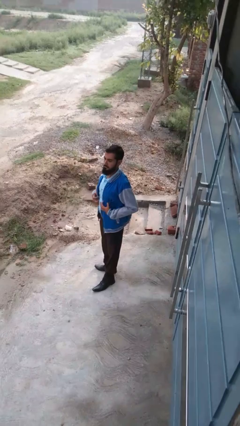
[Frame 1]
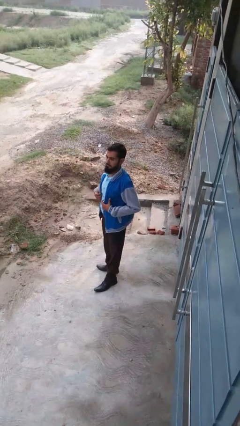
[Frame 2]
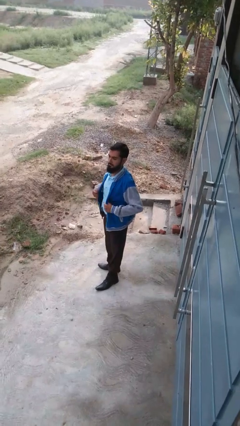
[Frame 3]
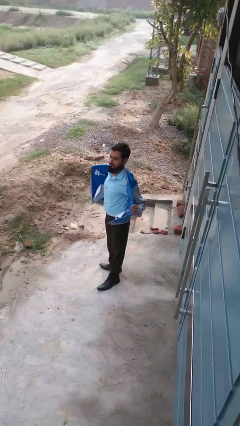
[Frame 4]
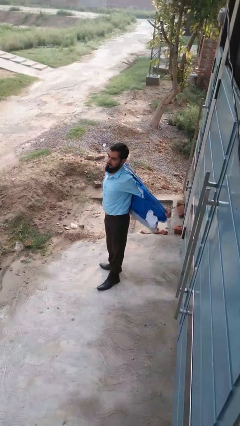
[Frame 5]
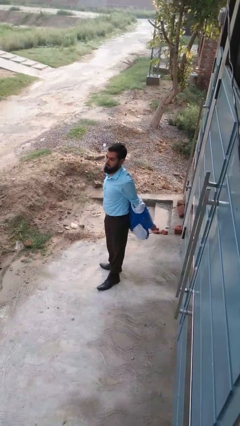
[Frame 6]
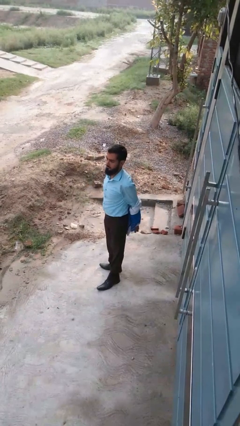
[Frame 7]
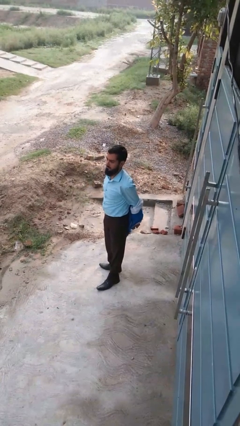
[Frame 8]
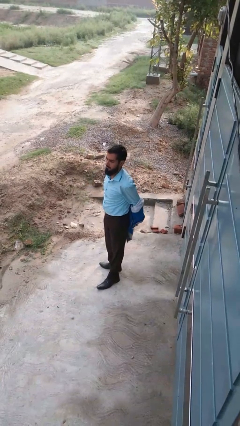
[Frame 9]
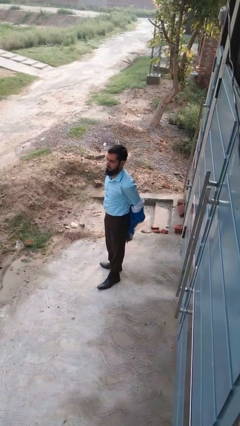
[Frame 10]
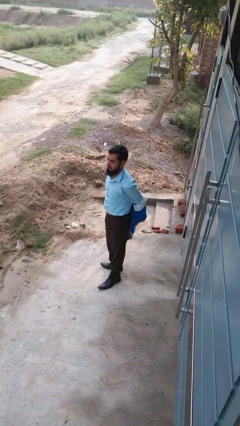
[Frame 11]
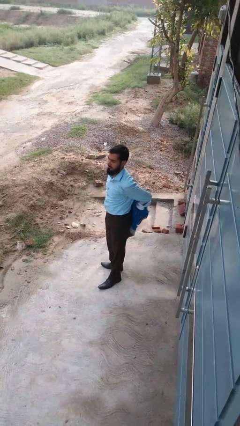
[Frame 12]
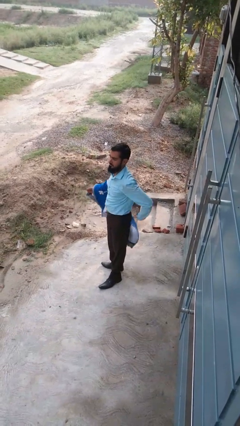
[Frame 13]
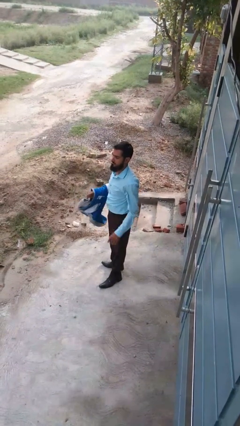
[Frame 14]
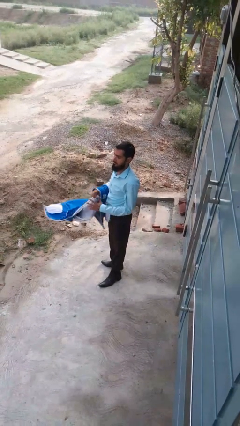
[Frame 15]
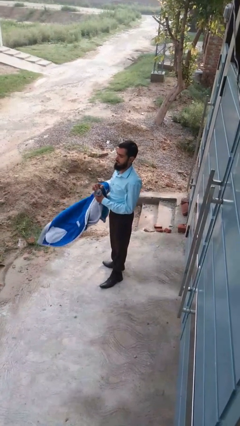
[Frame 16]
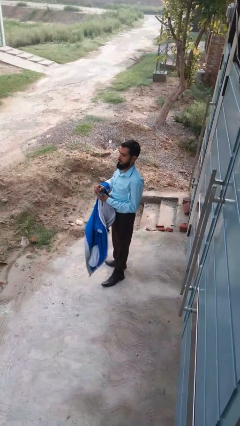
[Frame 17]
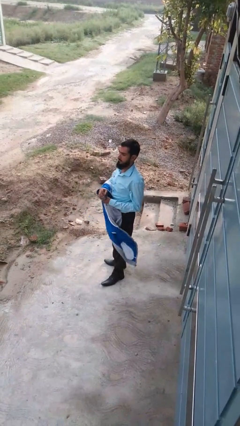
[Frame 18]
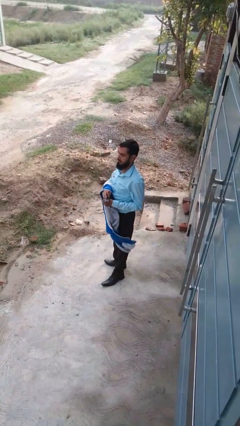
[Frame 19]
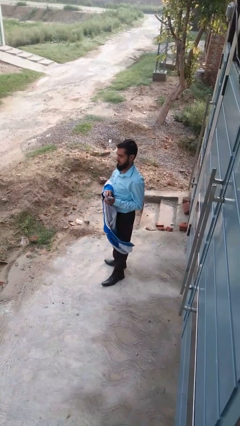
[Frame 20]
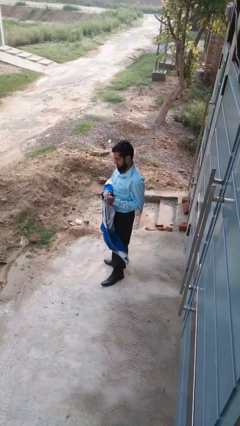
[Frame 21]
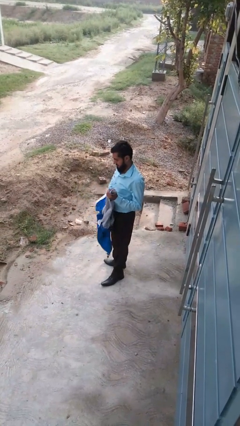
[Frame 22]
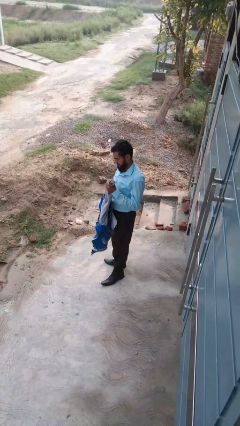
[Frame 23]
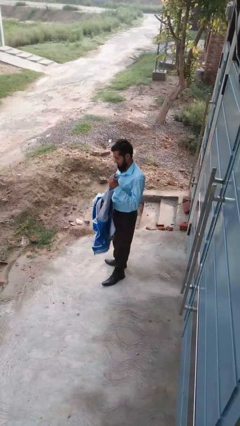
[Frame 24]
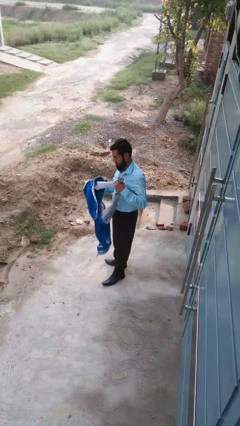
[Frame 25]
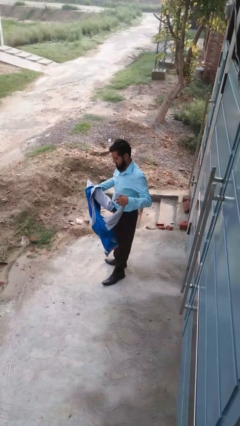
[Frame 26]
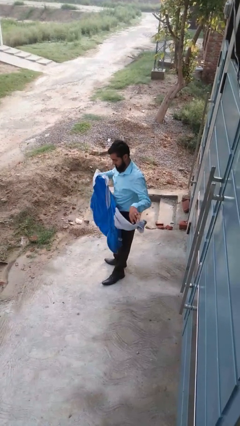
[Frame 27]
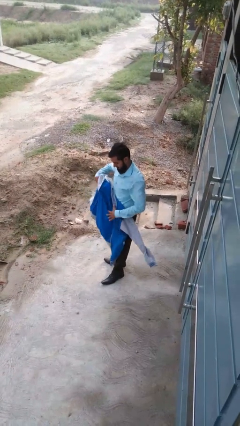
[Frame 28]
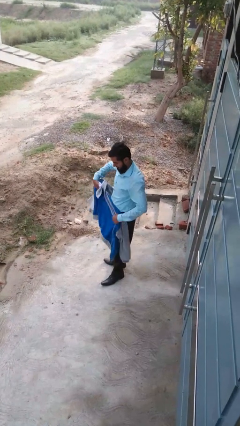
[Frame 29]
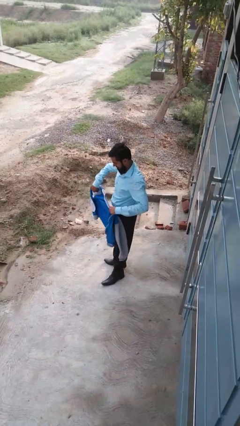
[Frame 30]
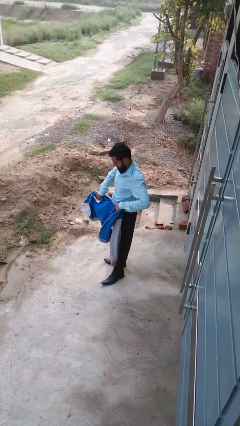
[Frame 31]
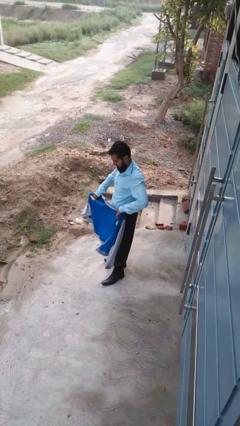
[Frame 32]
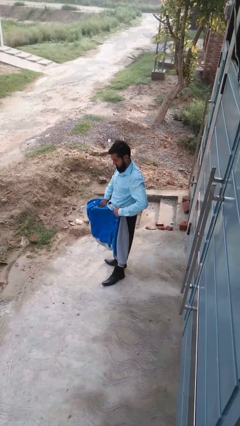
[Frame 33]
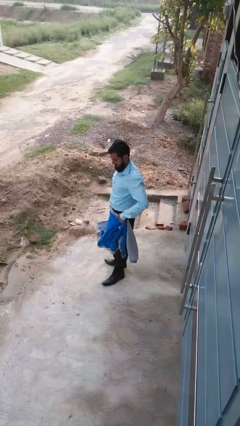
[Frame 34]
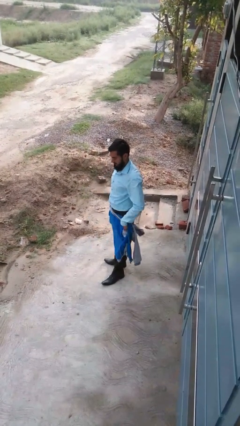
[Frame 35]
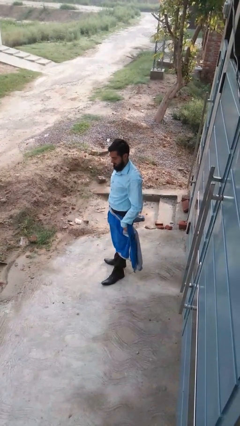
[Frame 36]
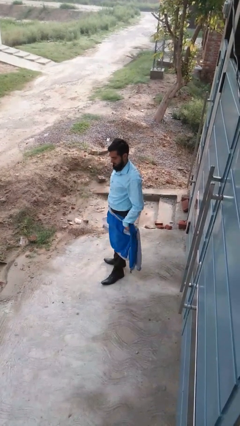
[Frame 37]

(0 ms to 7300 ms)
person takes off jacket

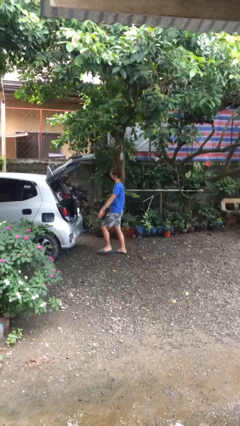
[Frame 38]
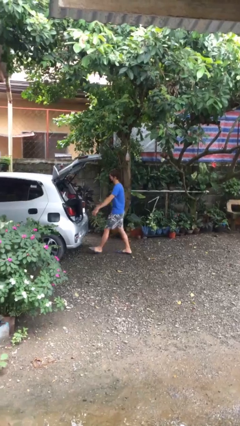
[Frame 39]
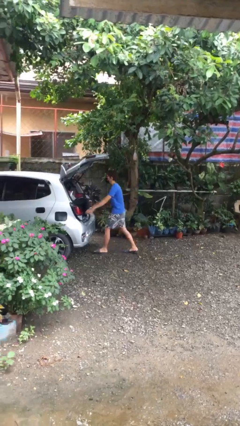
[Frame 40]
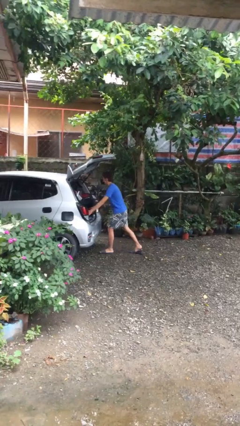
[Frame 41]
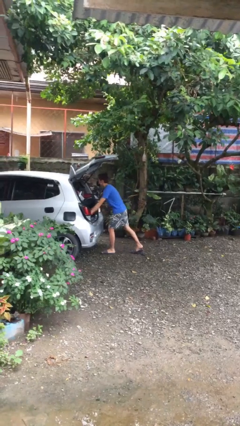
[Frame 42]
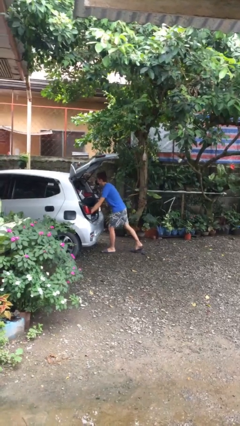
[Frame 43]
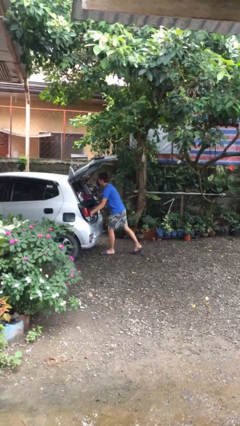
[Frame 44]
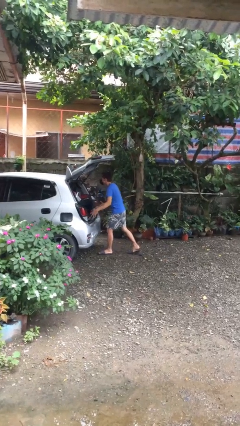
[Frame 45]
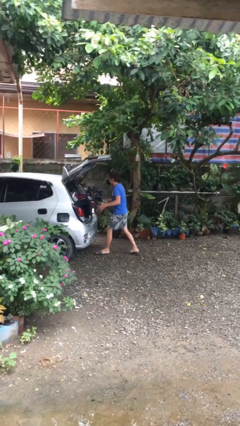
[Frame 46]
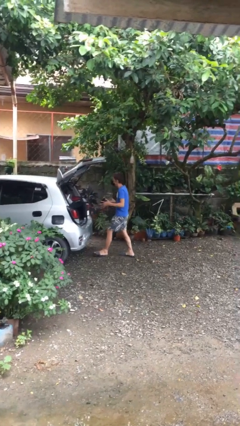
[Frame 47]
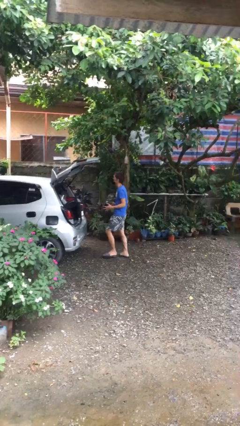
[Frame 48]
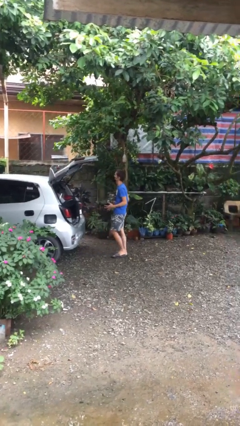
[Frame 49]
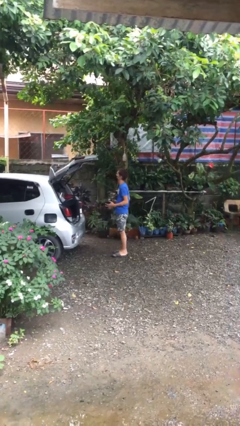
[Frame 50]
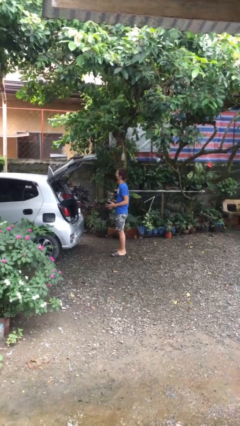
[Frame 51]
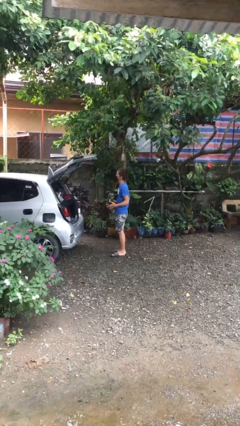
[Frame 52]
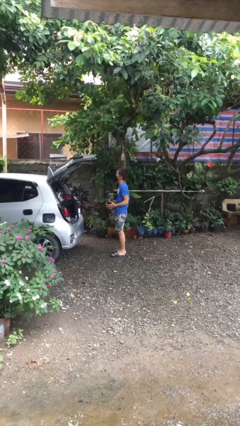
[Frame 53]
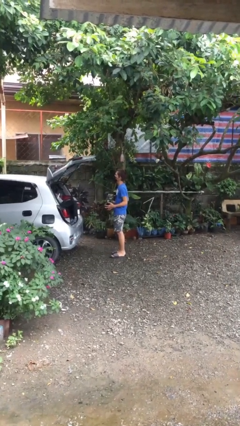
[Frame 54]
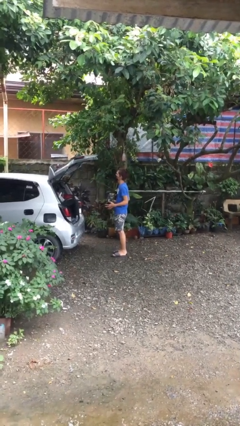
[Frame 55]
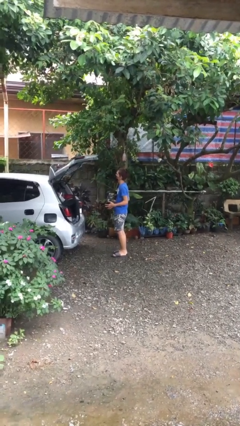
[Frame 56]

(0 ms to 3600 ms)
person unloads car

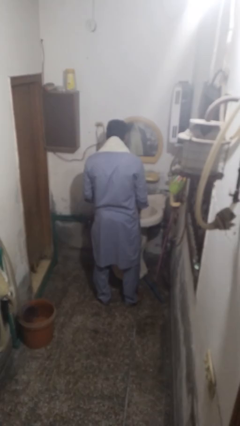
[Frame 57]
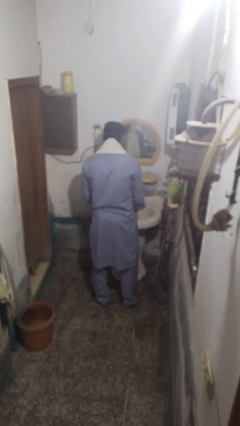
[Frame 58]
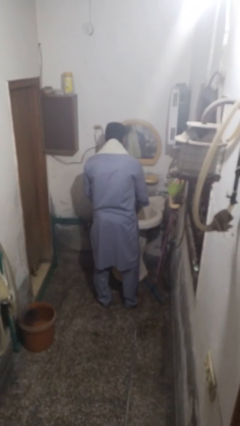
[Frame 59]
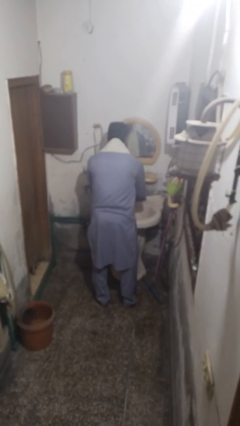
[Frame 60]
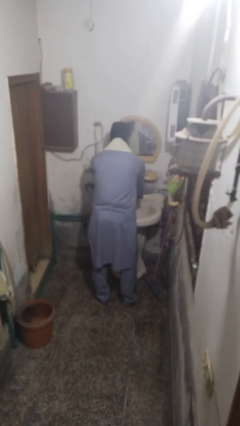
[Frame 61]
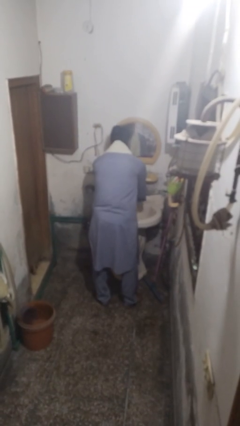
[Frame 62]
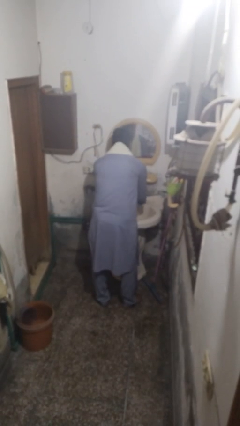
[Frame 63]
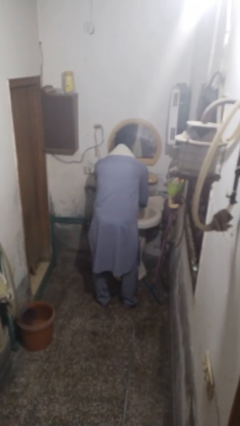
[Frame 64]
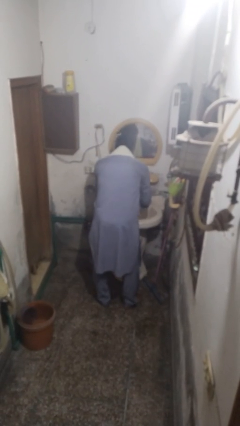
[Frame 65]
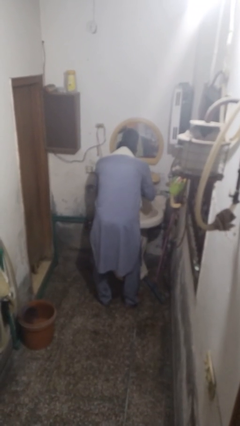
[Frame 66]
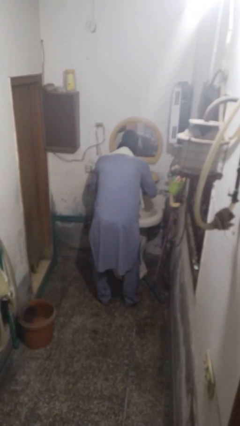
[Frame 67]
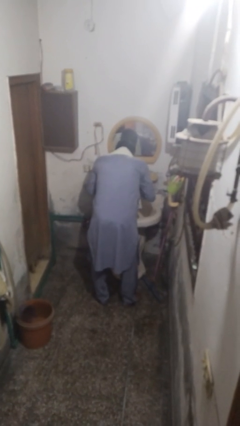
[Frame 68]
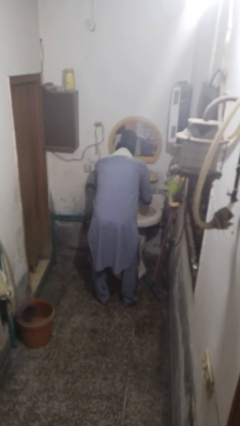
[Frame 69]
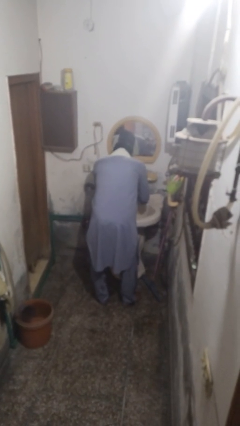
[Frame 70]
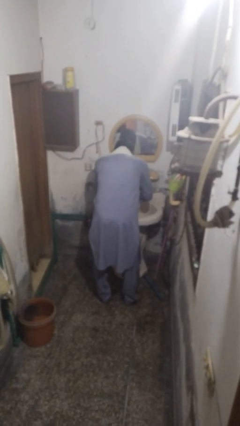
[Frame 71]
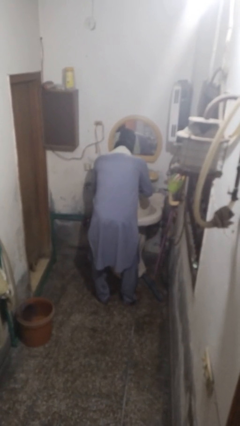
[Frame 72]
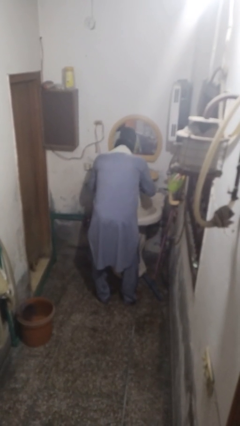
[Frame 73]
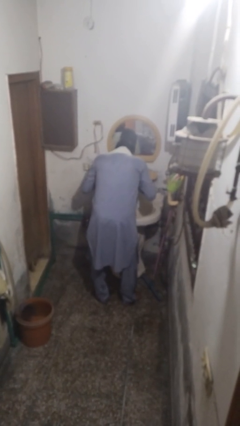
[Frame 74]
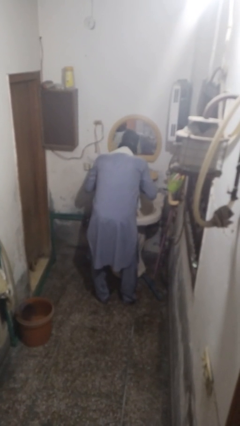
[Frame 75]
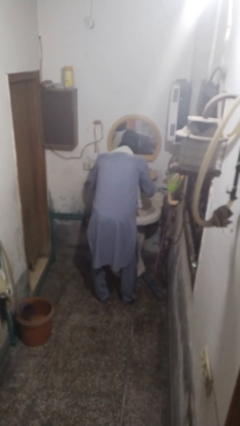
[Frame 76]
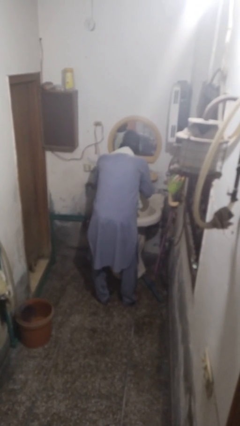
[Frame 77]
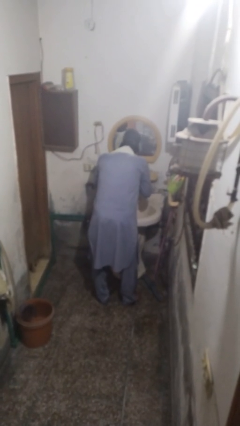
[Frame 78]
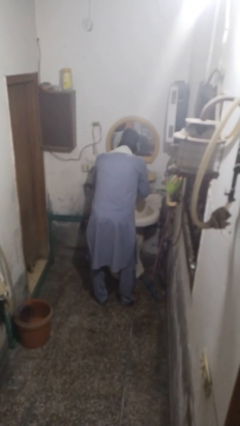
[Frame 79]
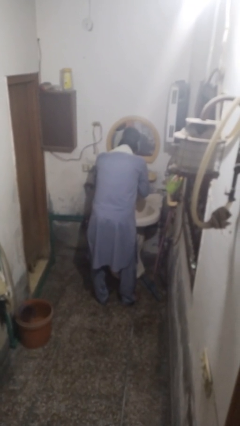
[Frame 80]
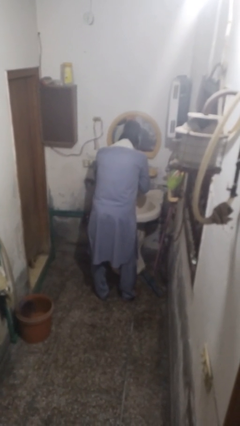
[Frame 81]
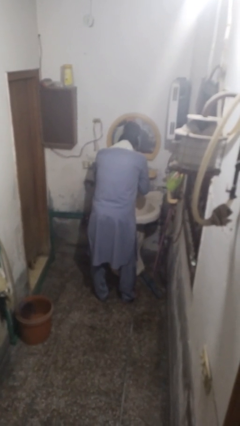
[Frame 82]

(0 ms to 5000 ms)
person washes face

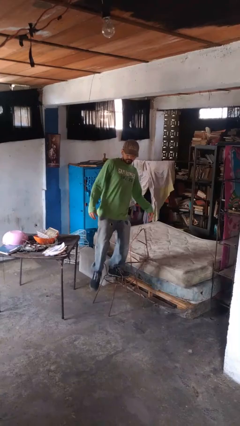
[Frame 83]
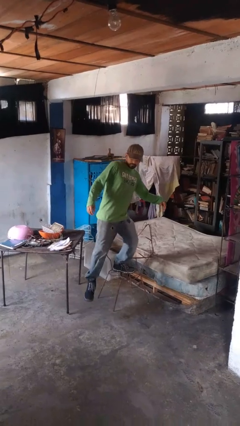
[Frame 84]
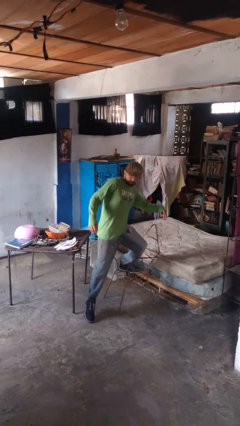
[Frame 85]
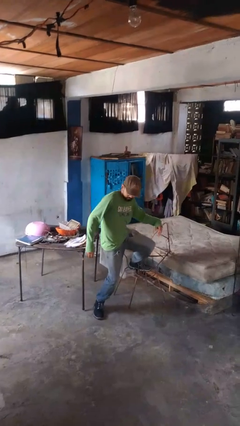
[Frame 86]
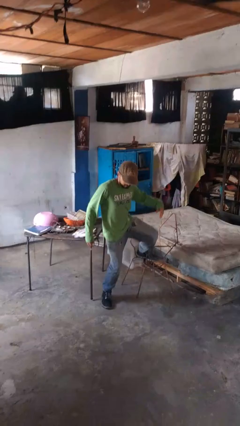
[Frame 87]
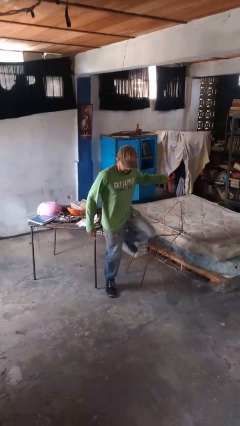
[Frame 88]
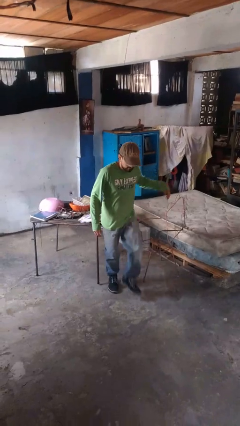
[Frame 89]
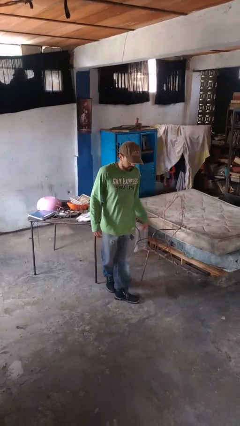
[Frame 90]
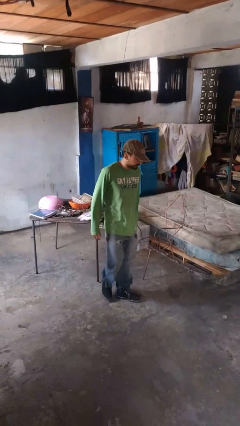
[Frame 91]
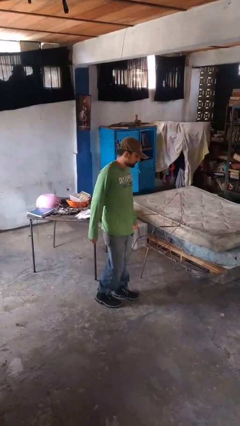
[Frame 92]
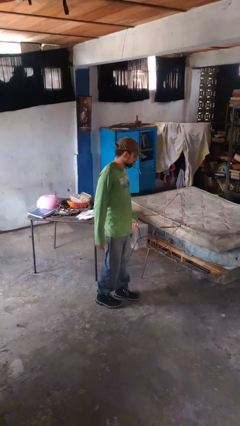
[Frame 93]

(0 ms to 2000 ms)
person climbs off chair
